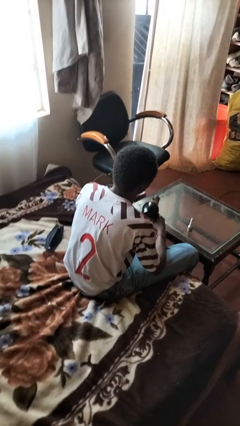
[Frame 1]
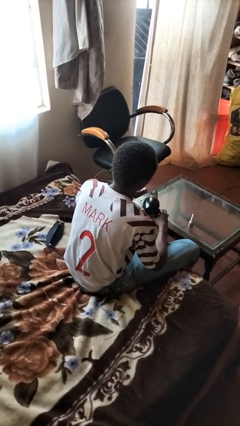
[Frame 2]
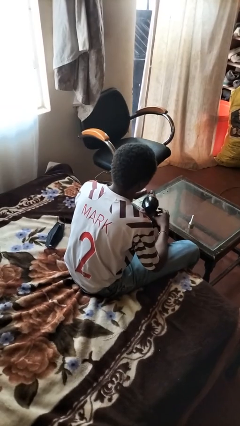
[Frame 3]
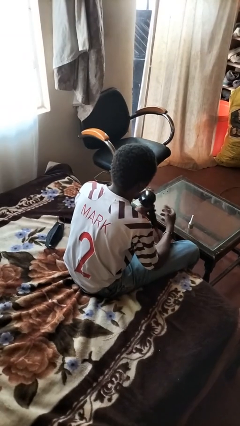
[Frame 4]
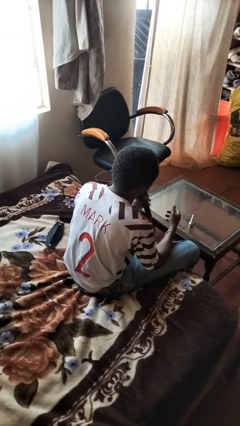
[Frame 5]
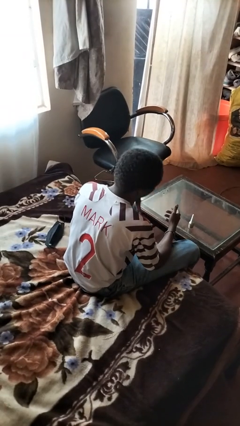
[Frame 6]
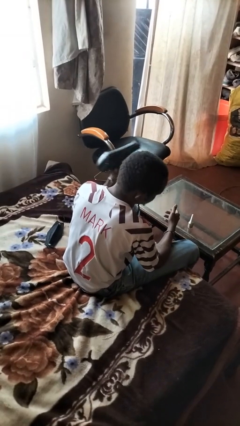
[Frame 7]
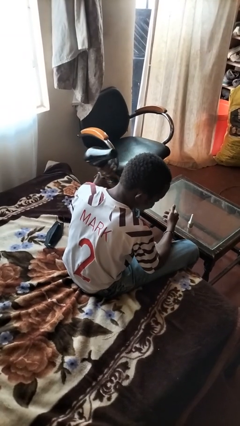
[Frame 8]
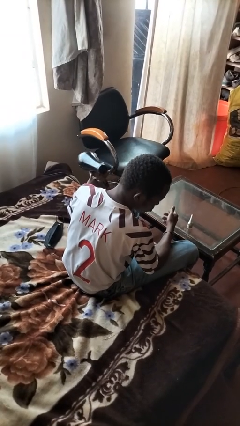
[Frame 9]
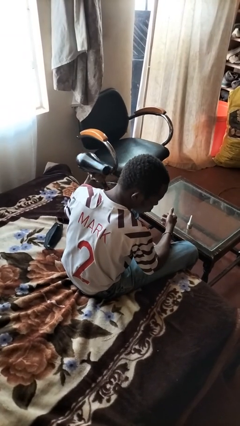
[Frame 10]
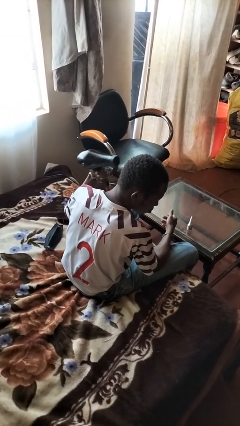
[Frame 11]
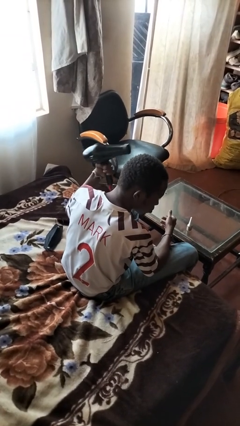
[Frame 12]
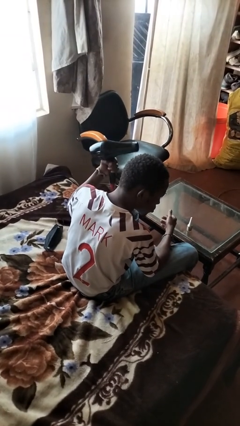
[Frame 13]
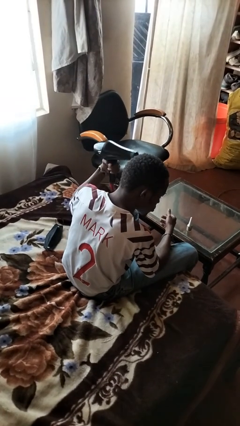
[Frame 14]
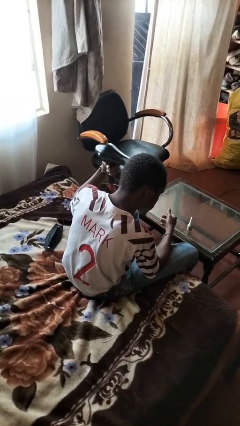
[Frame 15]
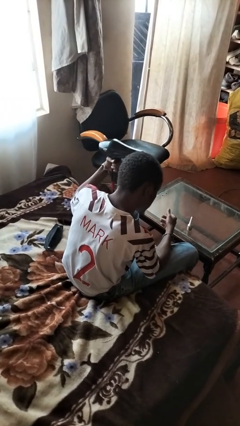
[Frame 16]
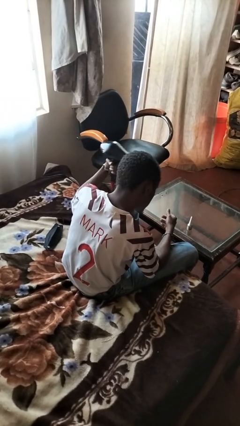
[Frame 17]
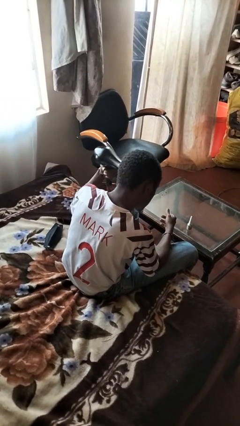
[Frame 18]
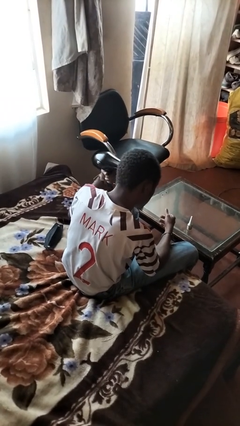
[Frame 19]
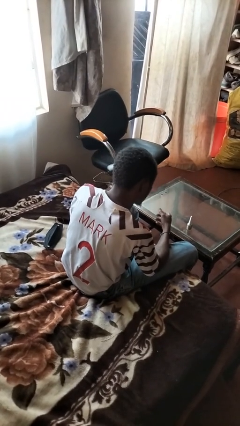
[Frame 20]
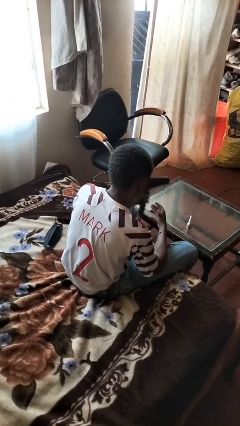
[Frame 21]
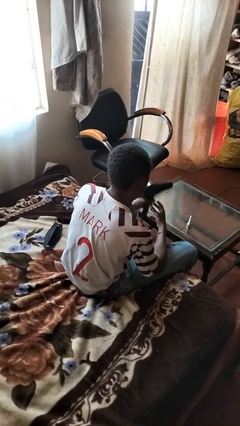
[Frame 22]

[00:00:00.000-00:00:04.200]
person dries hair with hairdryer

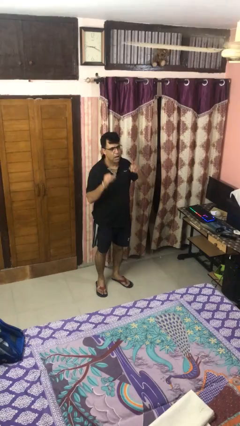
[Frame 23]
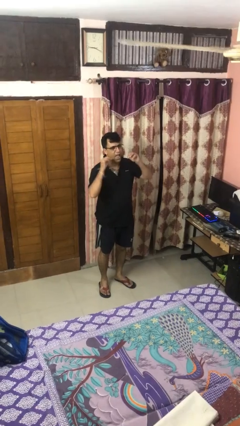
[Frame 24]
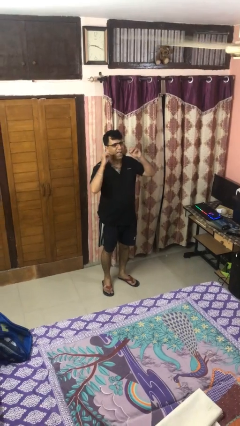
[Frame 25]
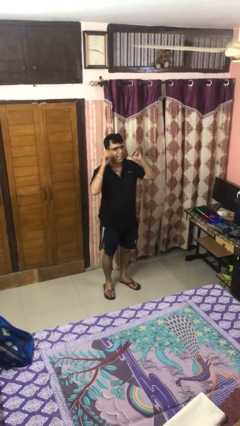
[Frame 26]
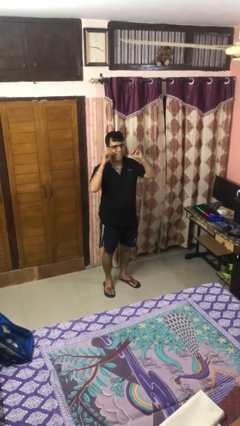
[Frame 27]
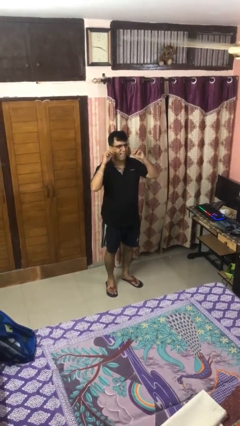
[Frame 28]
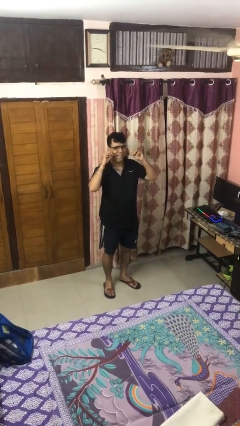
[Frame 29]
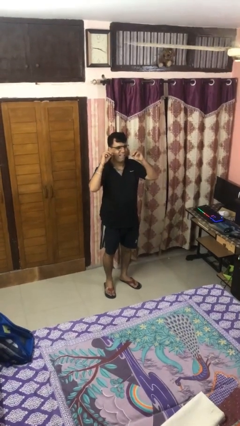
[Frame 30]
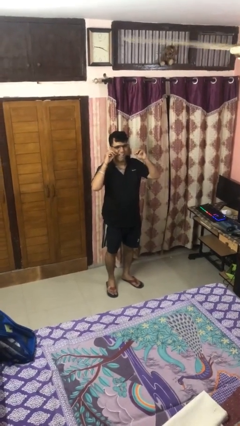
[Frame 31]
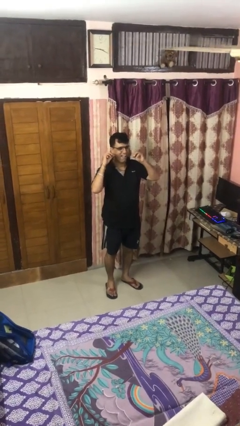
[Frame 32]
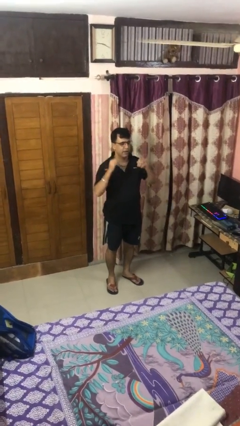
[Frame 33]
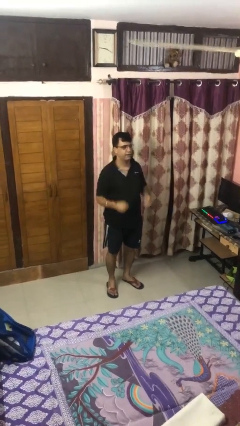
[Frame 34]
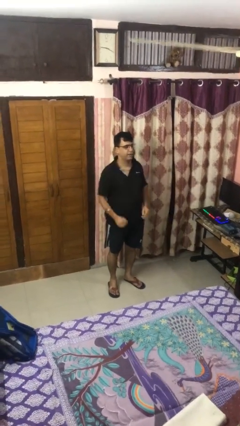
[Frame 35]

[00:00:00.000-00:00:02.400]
person flosses

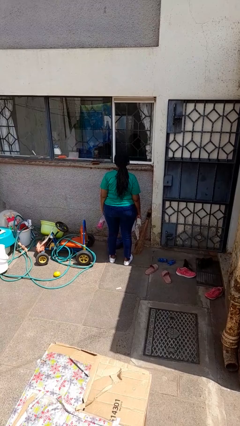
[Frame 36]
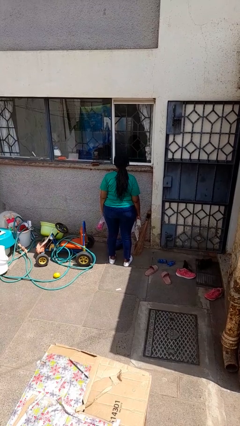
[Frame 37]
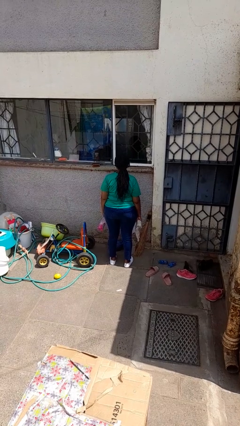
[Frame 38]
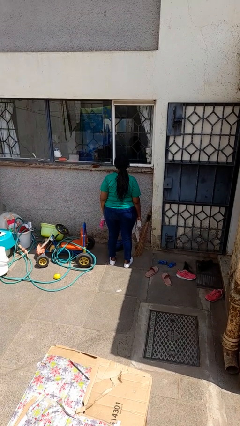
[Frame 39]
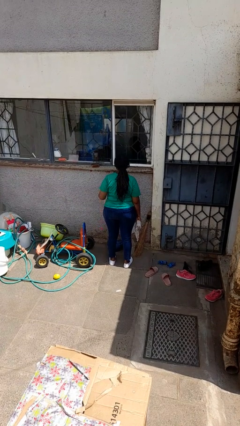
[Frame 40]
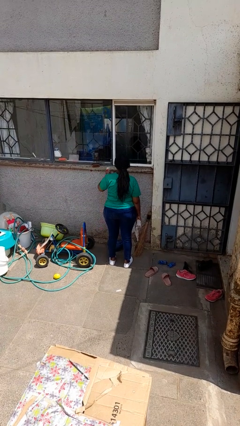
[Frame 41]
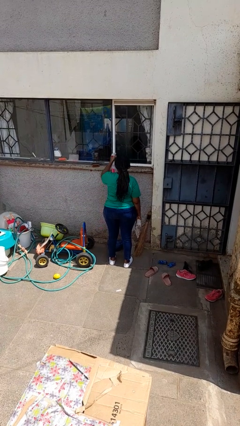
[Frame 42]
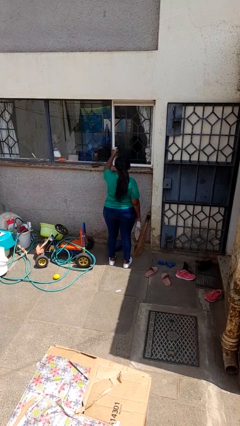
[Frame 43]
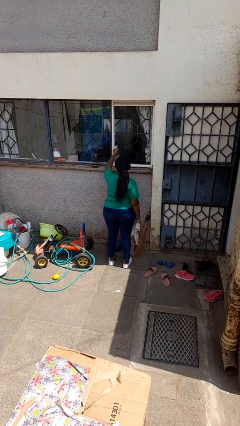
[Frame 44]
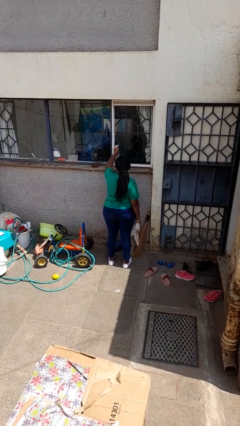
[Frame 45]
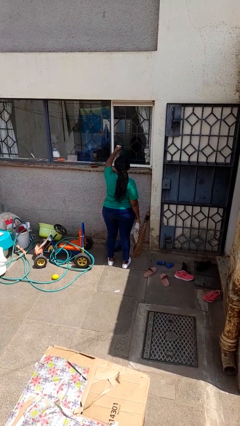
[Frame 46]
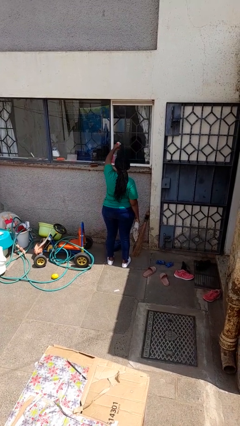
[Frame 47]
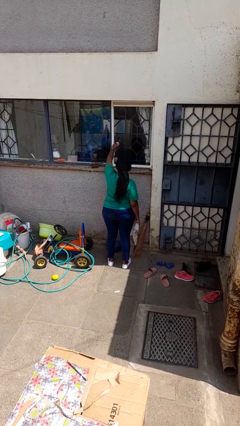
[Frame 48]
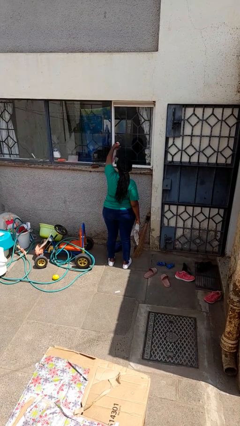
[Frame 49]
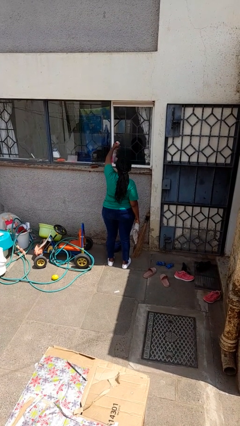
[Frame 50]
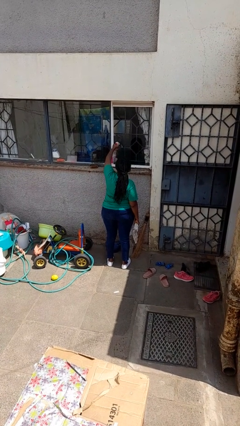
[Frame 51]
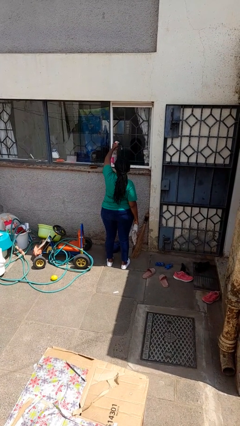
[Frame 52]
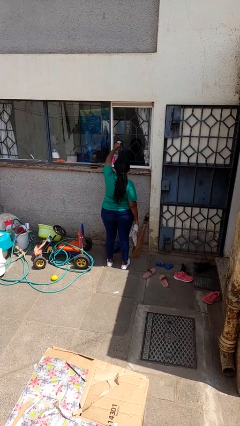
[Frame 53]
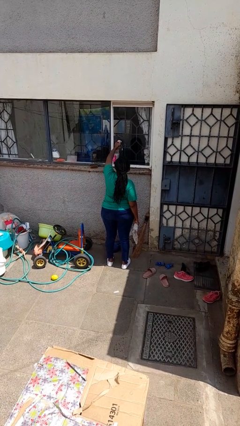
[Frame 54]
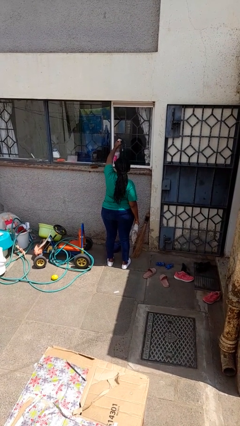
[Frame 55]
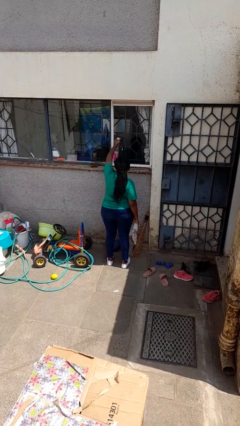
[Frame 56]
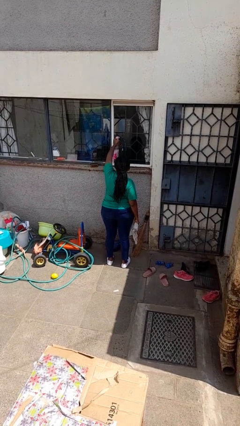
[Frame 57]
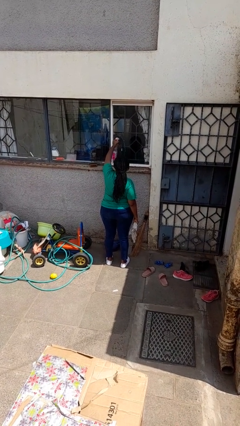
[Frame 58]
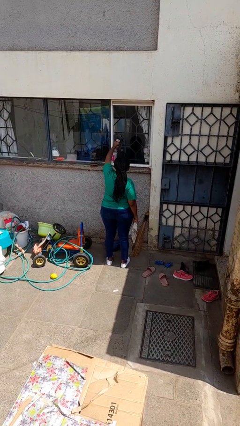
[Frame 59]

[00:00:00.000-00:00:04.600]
person sprays from bottle

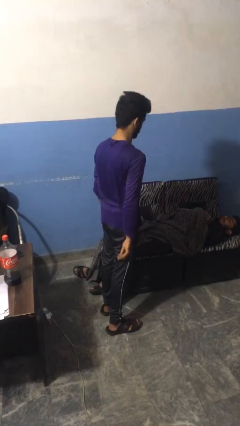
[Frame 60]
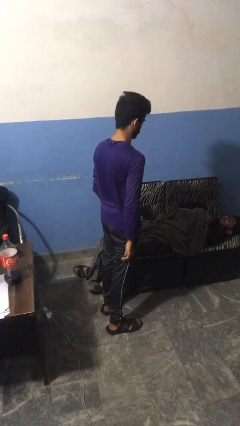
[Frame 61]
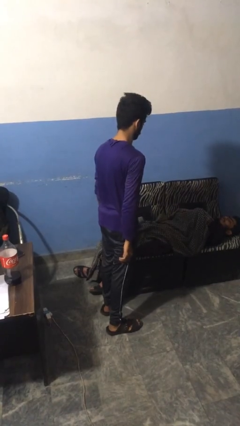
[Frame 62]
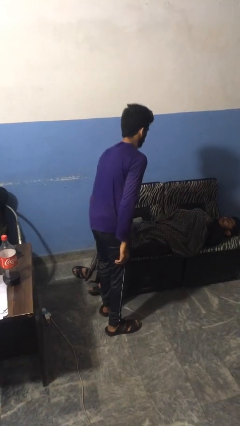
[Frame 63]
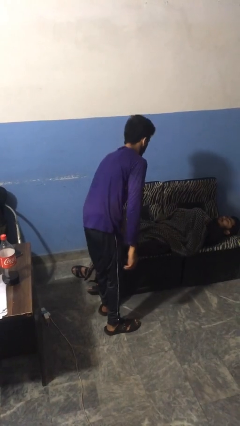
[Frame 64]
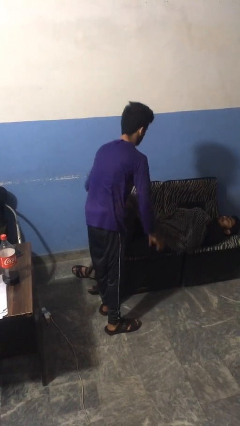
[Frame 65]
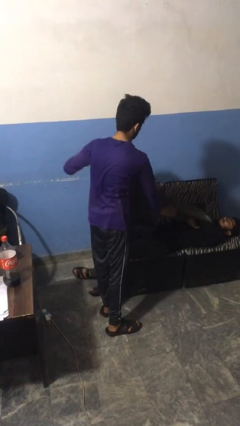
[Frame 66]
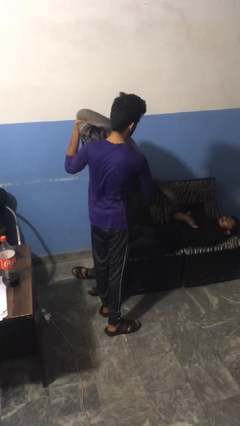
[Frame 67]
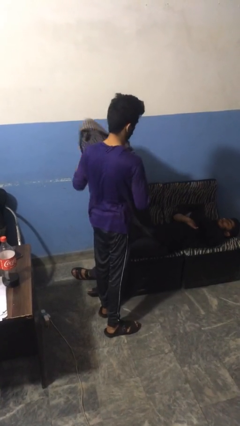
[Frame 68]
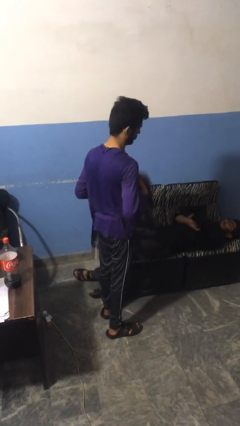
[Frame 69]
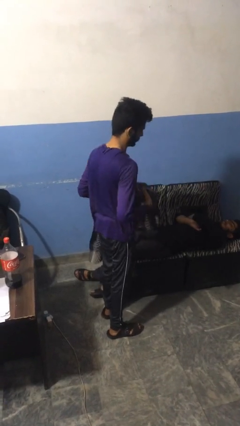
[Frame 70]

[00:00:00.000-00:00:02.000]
person uncovers friend with blanket

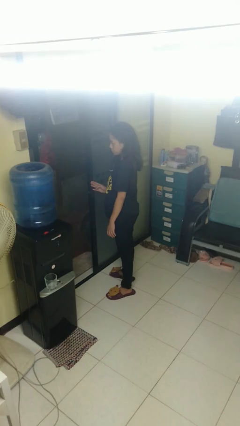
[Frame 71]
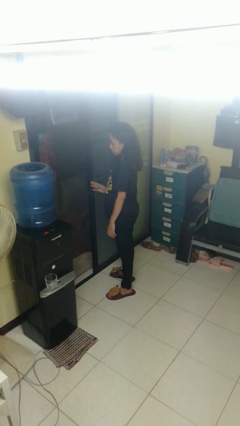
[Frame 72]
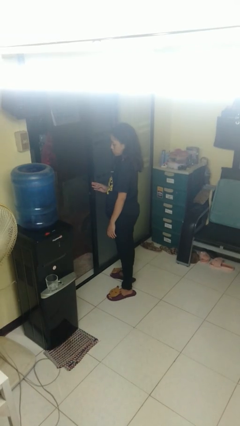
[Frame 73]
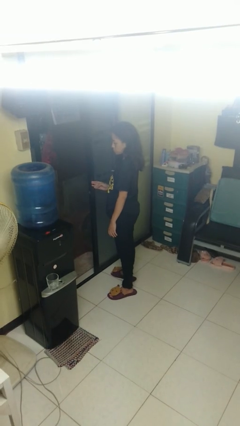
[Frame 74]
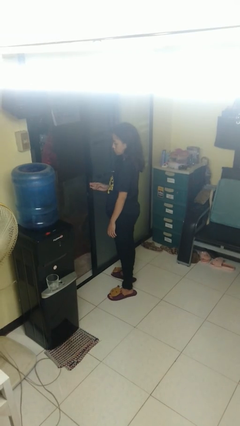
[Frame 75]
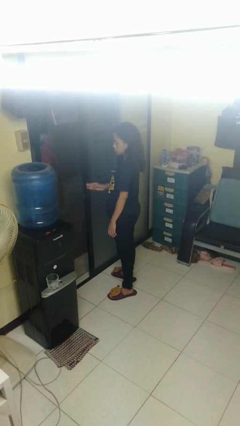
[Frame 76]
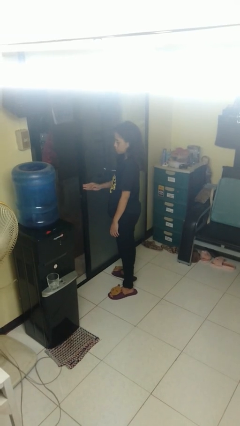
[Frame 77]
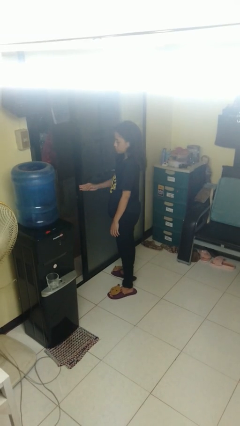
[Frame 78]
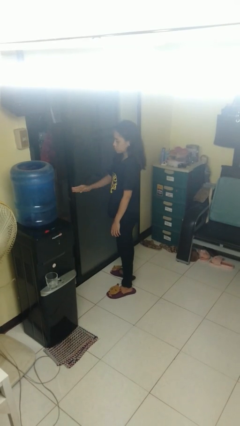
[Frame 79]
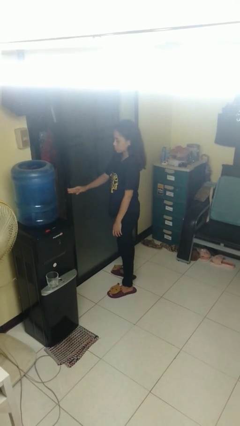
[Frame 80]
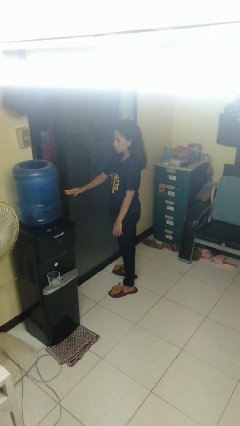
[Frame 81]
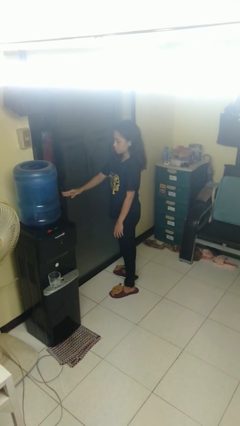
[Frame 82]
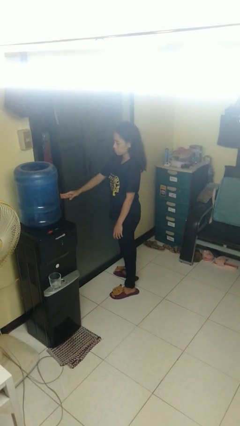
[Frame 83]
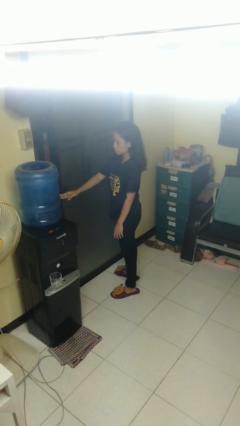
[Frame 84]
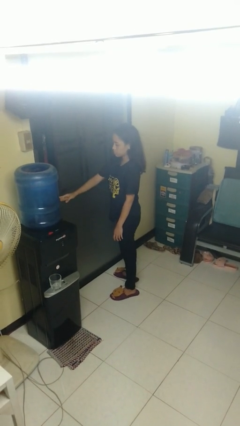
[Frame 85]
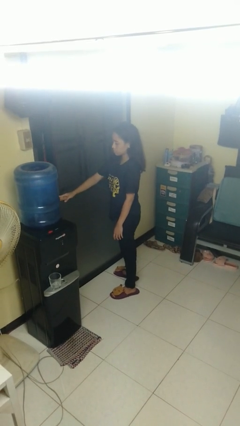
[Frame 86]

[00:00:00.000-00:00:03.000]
person closes sliding door

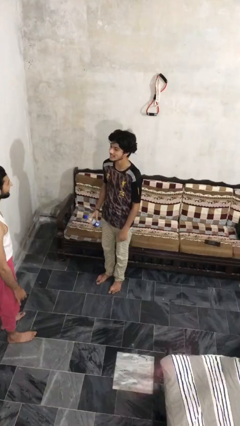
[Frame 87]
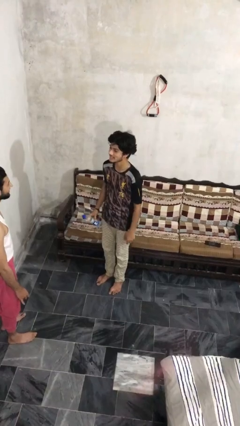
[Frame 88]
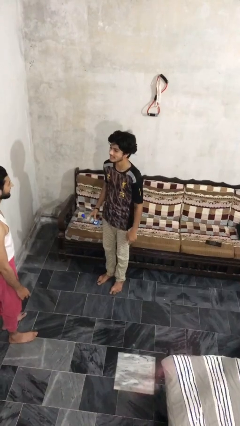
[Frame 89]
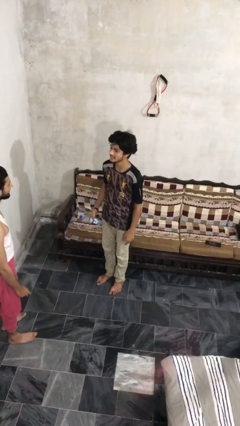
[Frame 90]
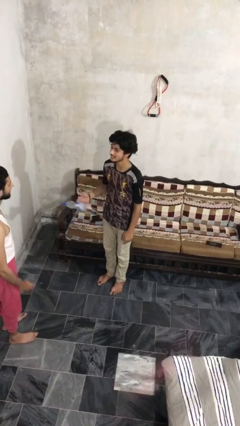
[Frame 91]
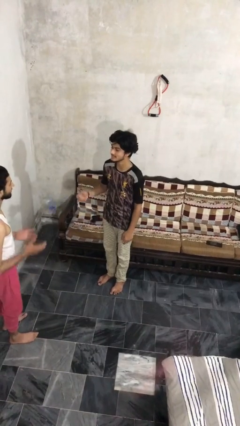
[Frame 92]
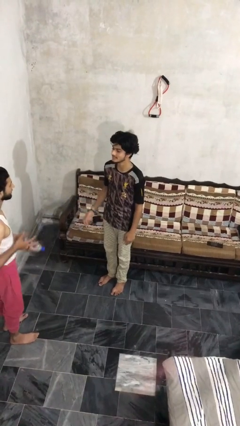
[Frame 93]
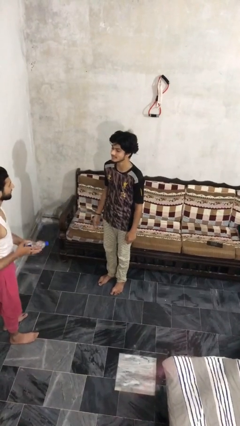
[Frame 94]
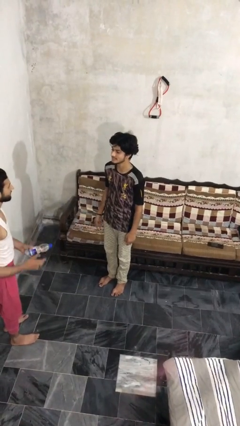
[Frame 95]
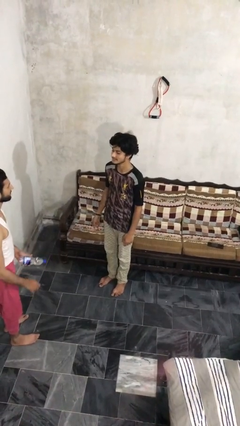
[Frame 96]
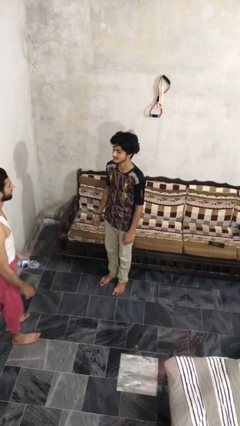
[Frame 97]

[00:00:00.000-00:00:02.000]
person throws object to person
